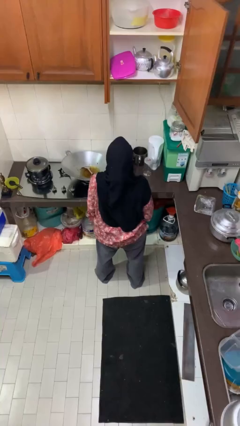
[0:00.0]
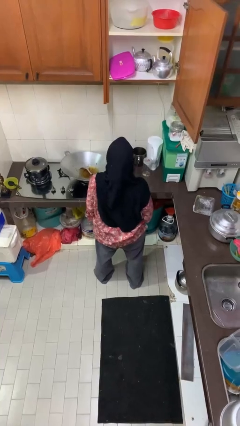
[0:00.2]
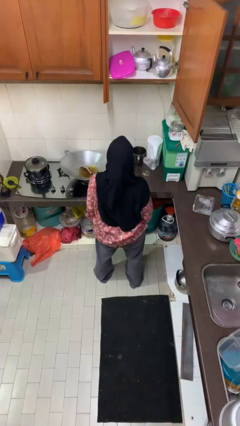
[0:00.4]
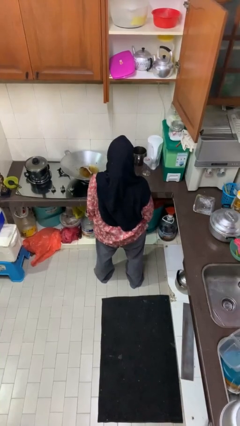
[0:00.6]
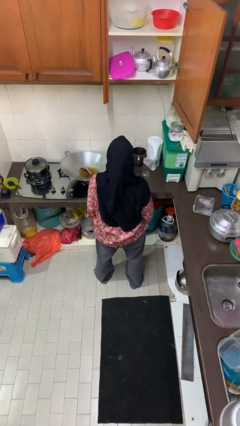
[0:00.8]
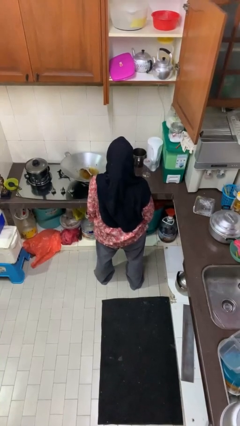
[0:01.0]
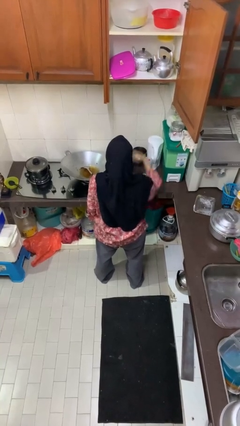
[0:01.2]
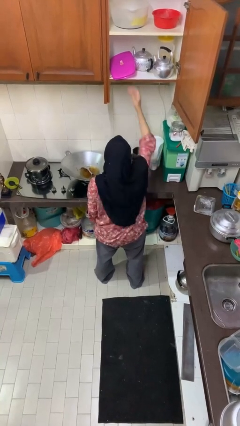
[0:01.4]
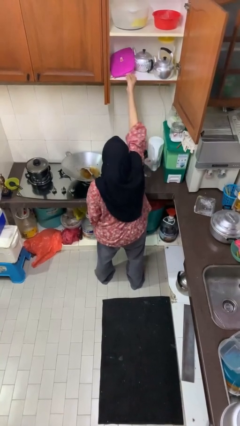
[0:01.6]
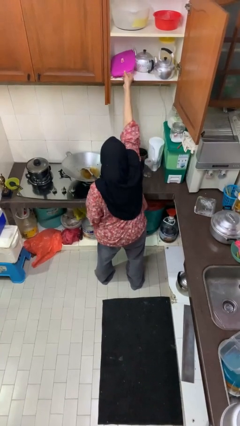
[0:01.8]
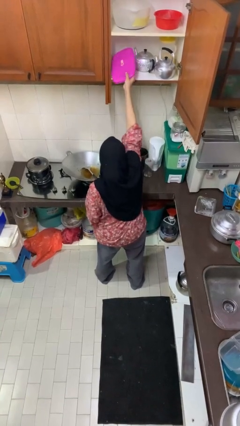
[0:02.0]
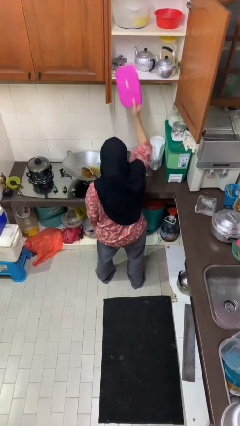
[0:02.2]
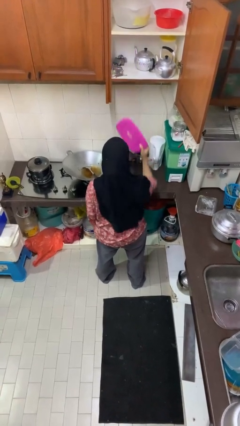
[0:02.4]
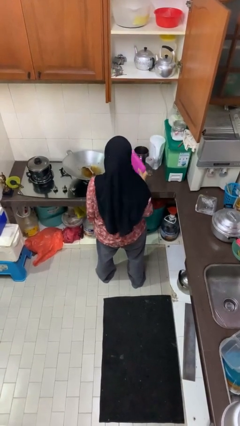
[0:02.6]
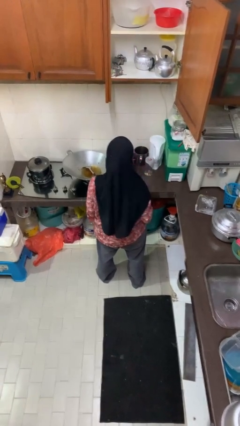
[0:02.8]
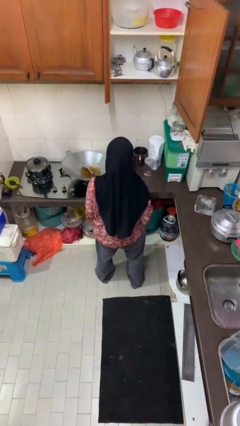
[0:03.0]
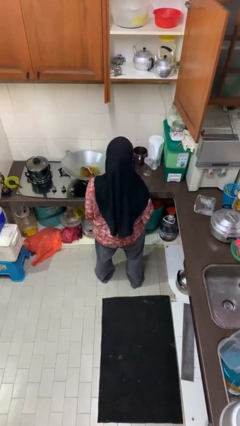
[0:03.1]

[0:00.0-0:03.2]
person takes object from cabinet

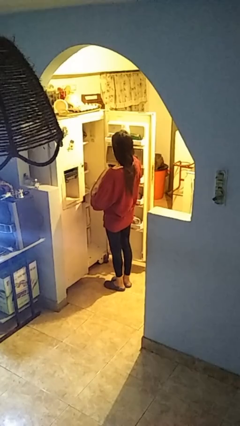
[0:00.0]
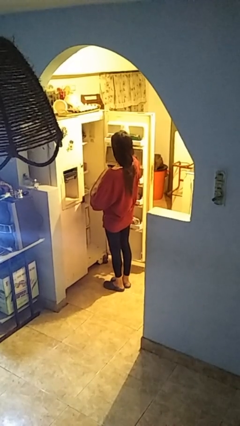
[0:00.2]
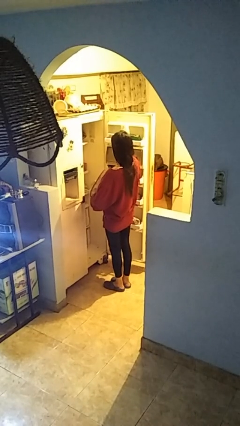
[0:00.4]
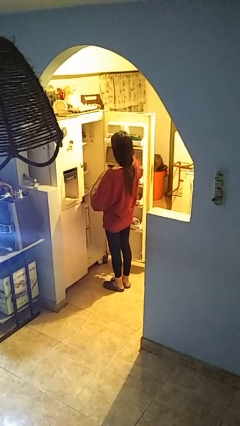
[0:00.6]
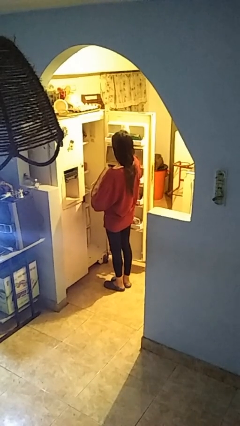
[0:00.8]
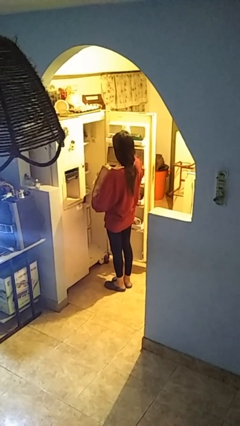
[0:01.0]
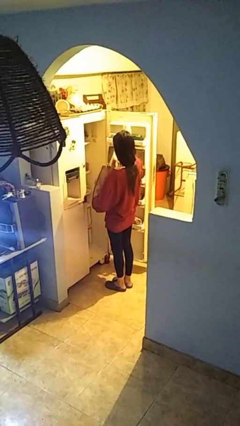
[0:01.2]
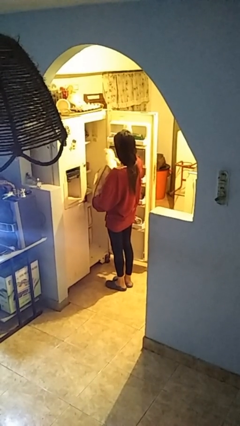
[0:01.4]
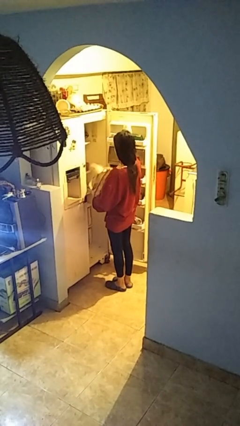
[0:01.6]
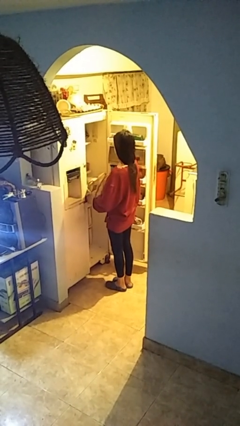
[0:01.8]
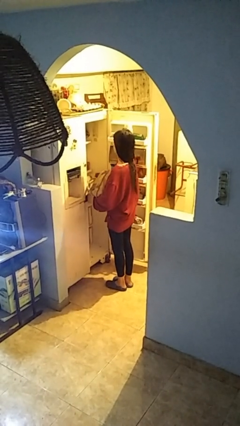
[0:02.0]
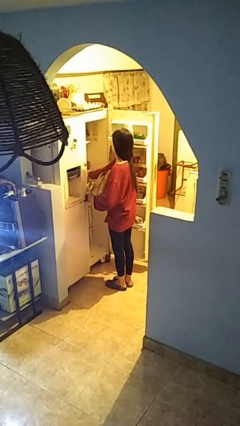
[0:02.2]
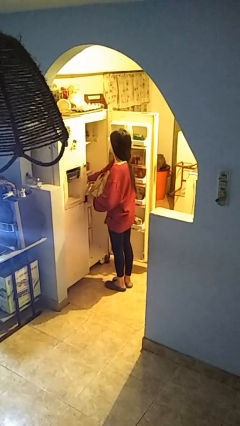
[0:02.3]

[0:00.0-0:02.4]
person loads groceries into refrigerator

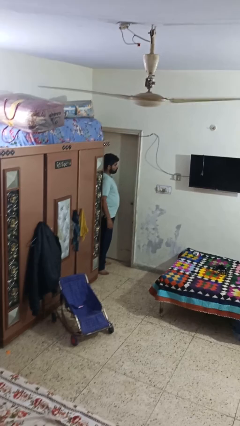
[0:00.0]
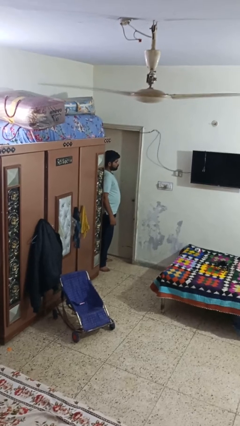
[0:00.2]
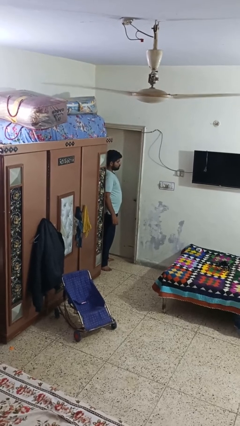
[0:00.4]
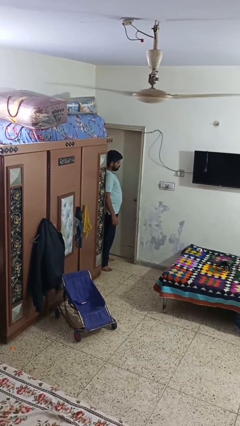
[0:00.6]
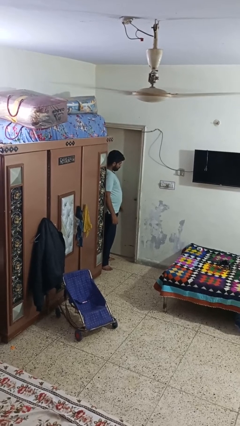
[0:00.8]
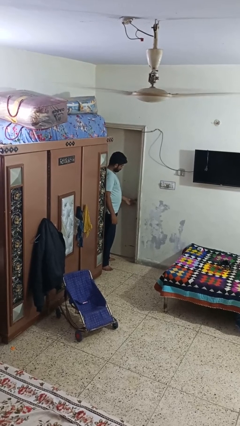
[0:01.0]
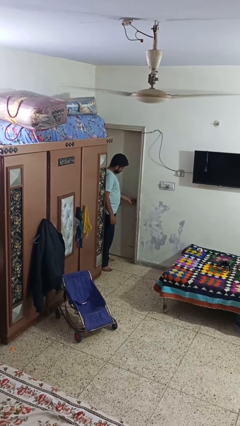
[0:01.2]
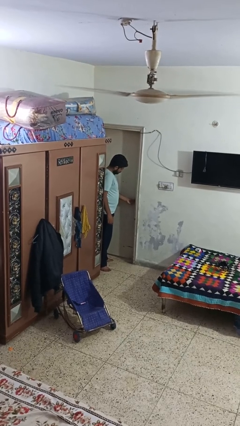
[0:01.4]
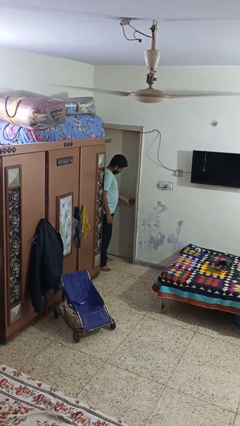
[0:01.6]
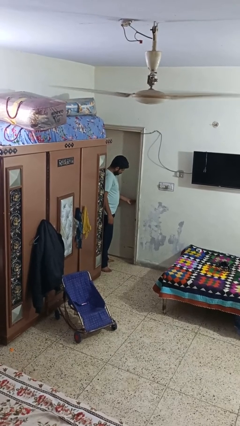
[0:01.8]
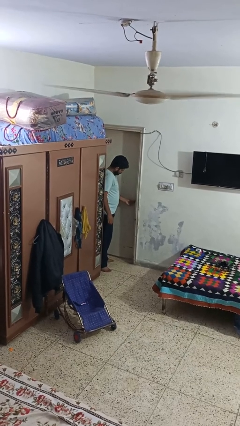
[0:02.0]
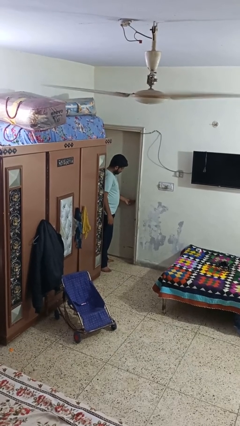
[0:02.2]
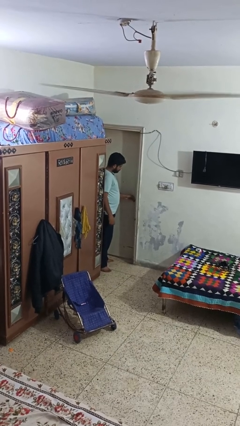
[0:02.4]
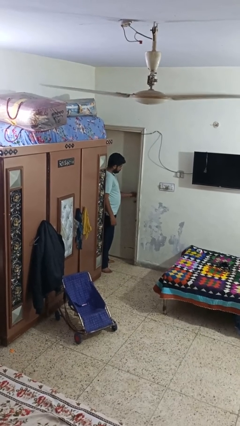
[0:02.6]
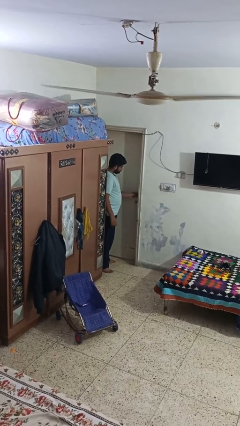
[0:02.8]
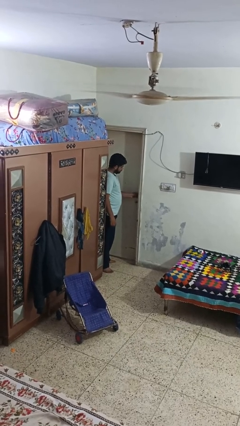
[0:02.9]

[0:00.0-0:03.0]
person unlocks door with keys

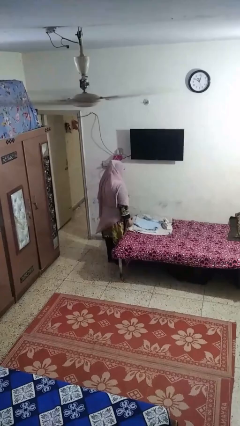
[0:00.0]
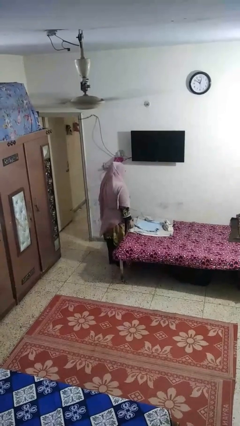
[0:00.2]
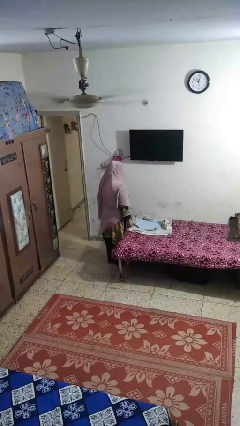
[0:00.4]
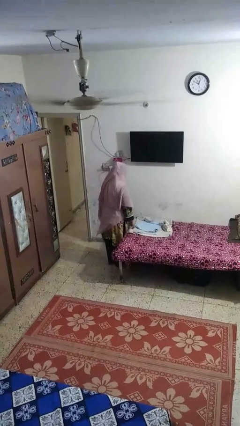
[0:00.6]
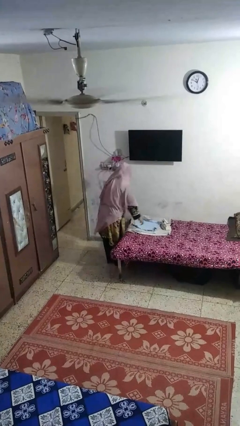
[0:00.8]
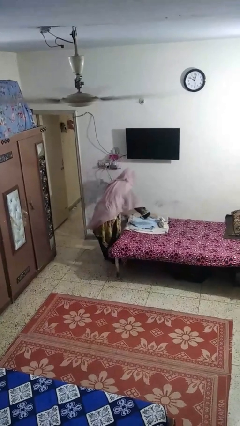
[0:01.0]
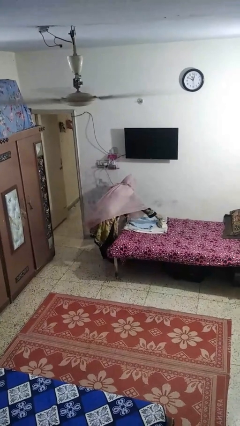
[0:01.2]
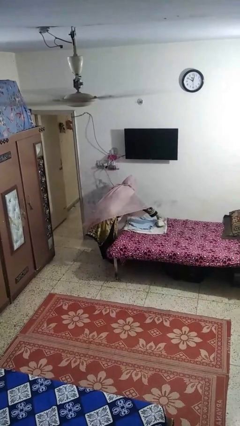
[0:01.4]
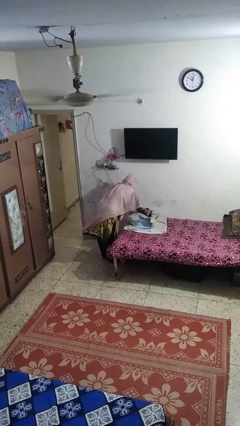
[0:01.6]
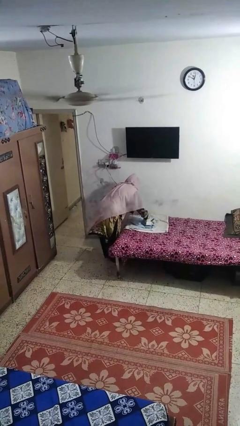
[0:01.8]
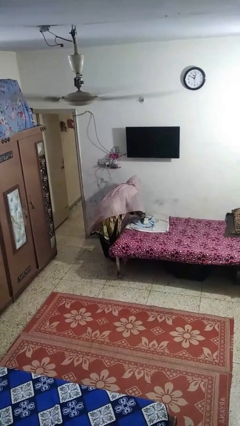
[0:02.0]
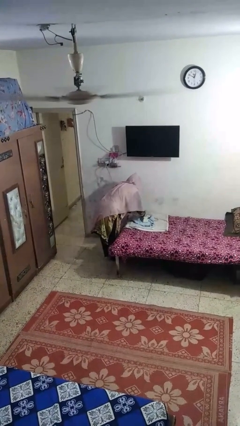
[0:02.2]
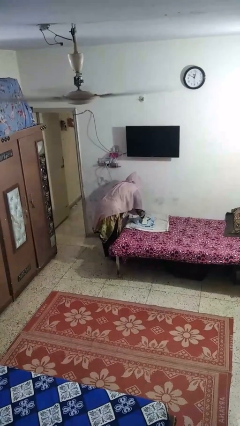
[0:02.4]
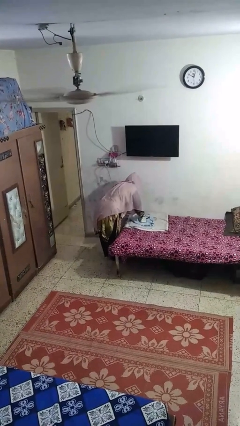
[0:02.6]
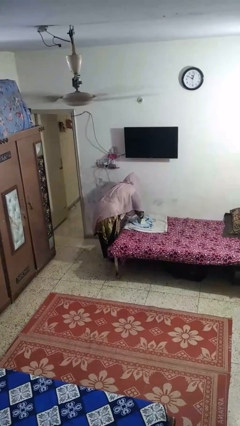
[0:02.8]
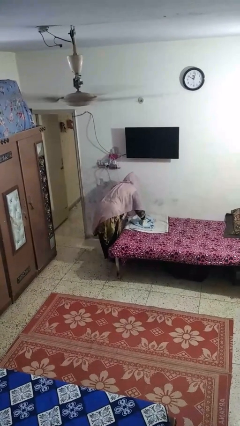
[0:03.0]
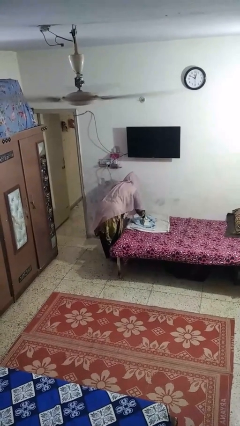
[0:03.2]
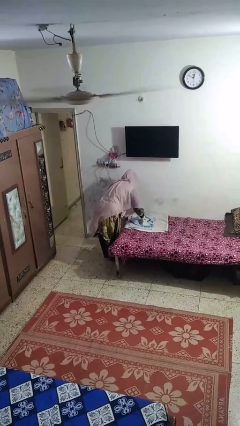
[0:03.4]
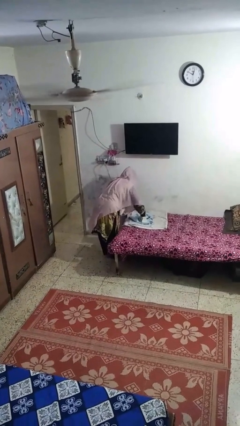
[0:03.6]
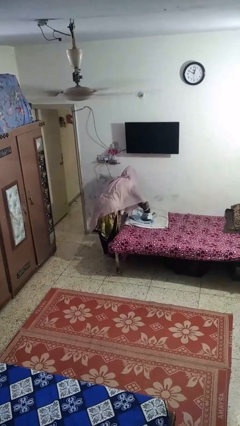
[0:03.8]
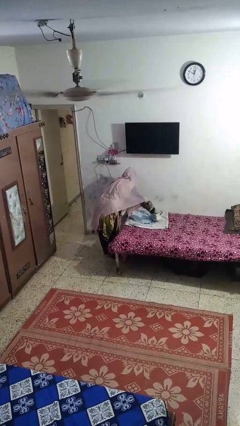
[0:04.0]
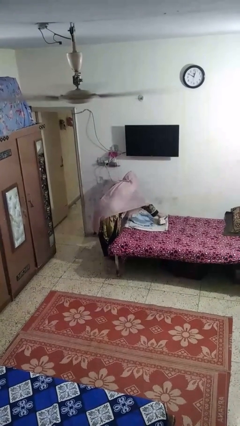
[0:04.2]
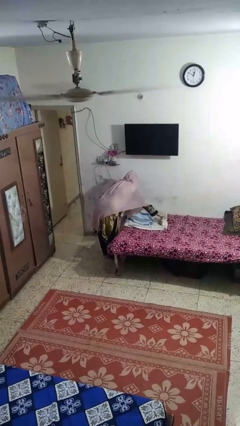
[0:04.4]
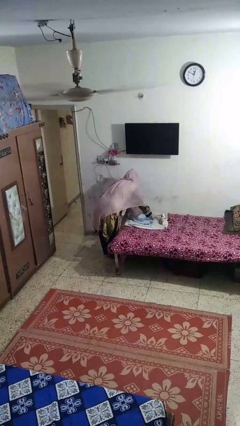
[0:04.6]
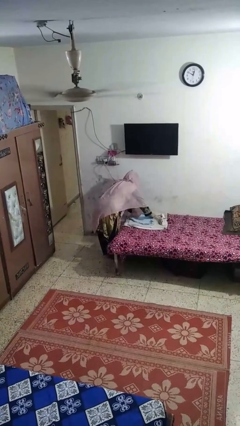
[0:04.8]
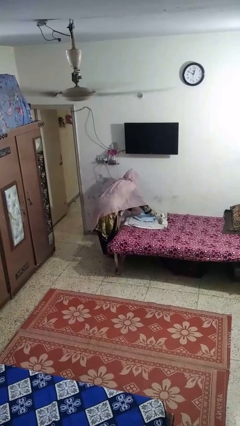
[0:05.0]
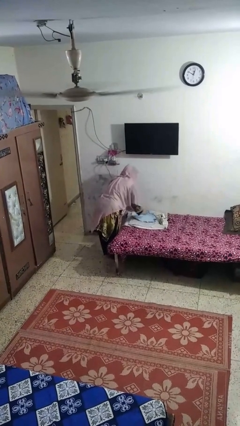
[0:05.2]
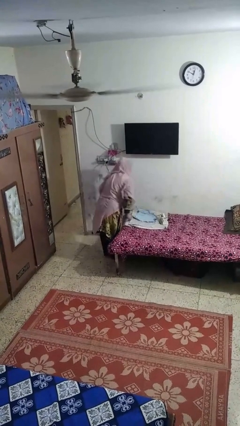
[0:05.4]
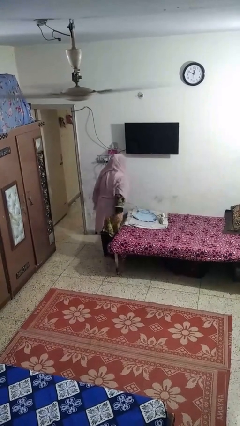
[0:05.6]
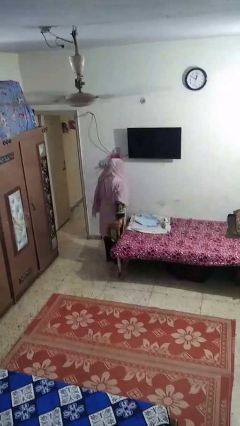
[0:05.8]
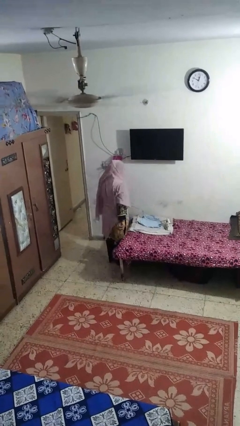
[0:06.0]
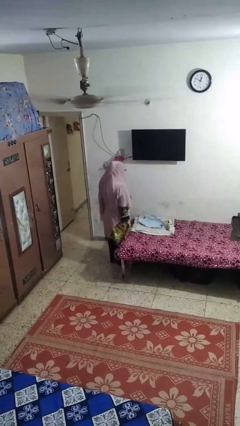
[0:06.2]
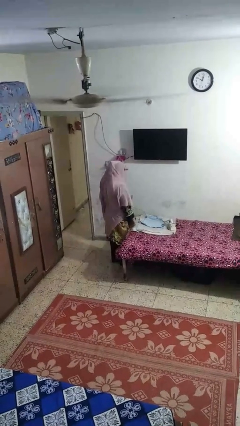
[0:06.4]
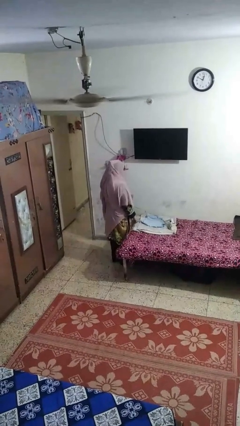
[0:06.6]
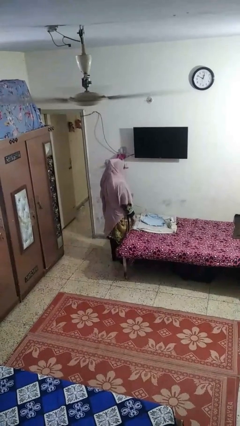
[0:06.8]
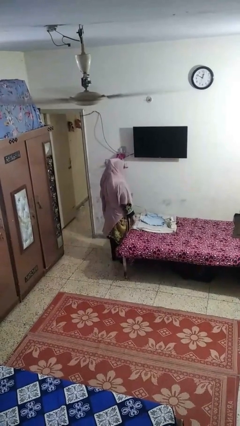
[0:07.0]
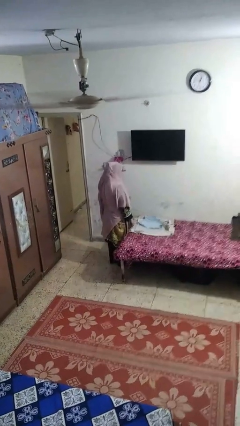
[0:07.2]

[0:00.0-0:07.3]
person irons clothes

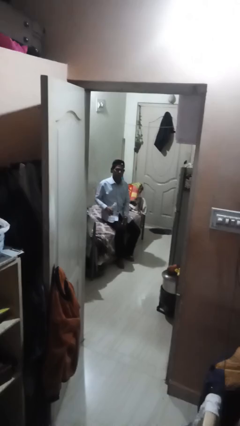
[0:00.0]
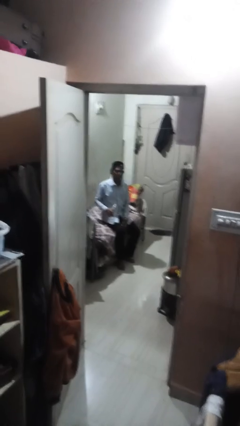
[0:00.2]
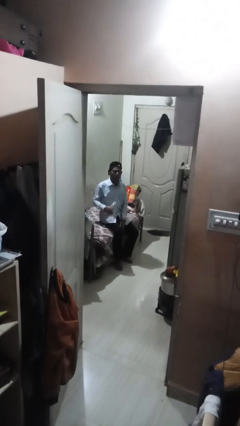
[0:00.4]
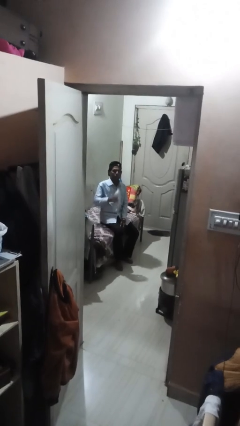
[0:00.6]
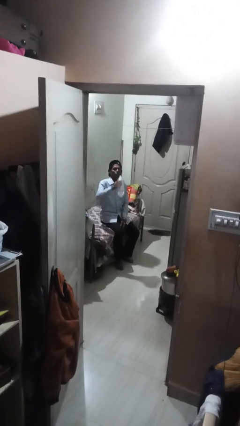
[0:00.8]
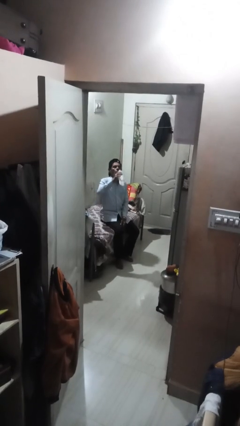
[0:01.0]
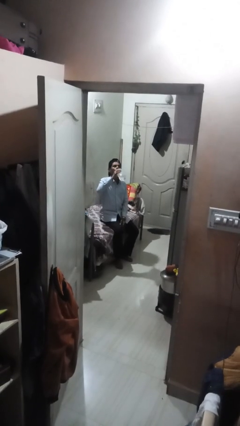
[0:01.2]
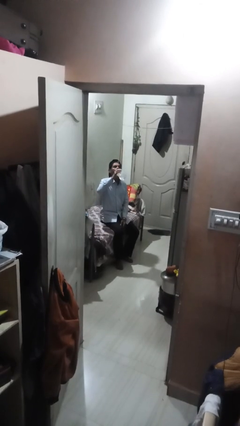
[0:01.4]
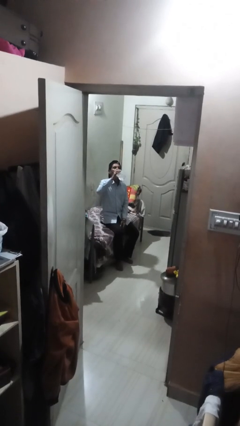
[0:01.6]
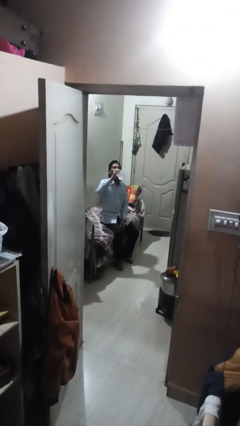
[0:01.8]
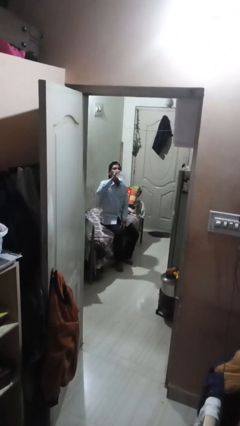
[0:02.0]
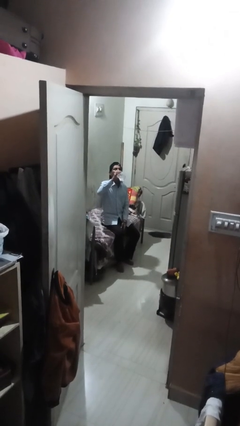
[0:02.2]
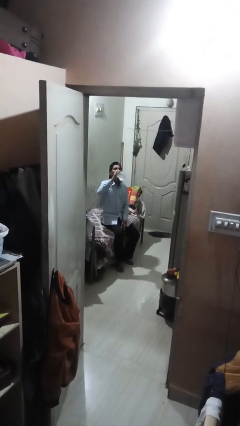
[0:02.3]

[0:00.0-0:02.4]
person drinks from bottle
